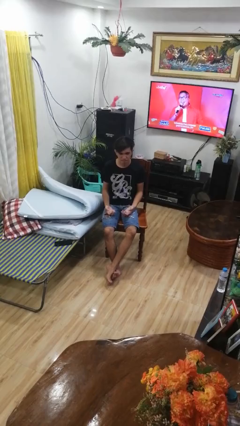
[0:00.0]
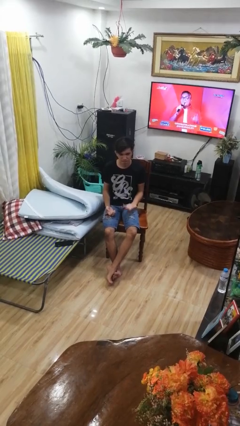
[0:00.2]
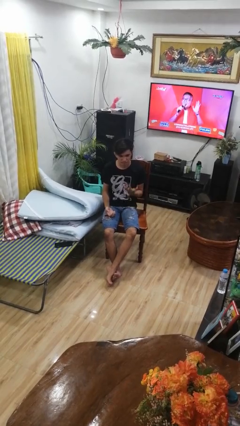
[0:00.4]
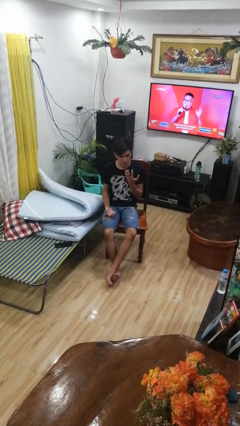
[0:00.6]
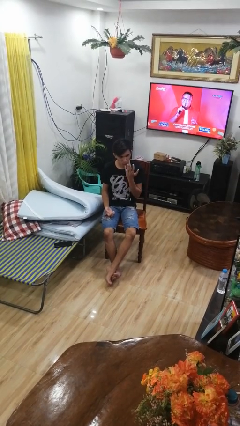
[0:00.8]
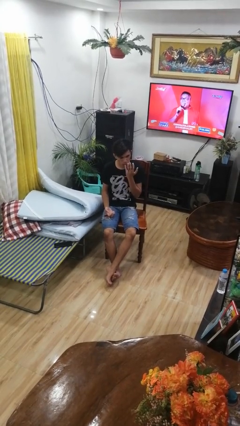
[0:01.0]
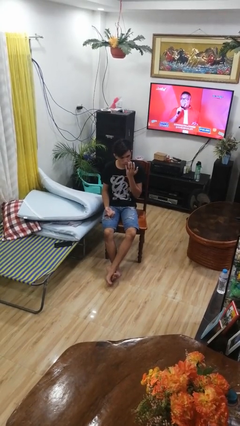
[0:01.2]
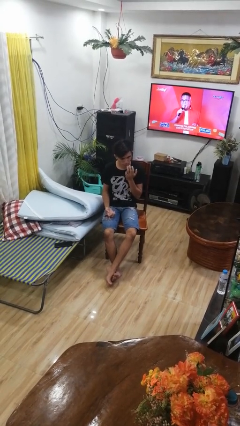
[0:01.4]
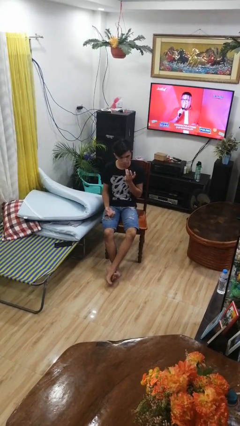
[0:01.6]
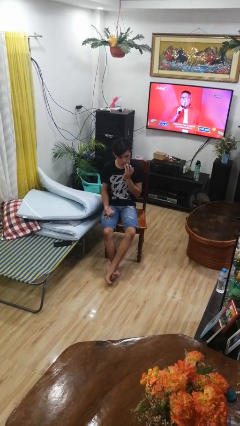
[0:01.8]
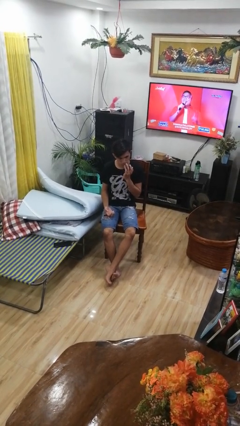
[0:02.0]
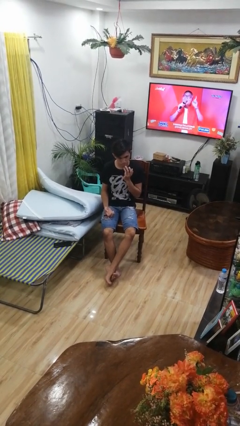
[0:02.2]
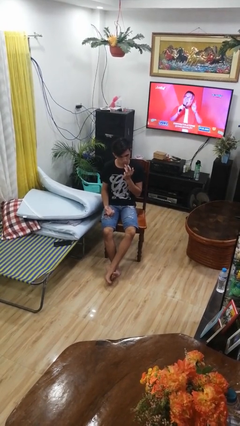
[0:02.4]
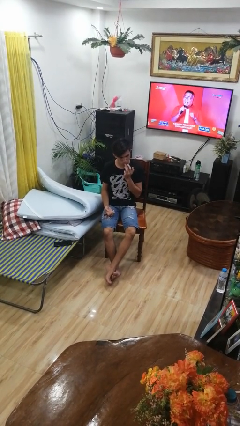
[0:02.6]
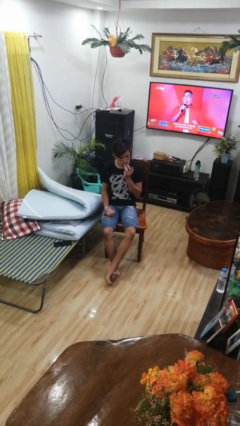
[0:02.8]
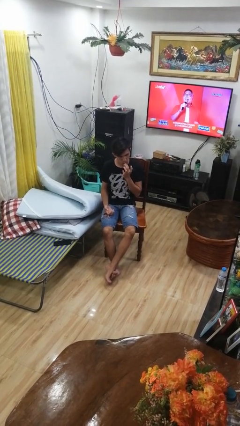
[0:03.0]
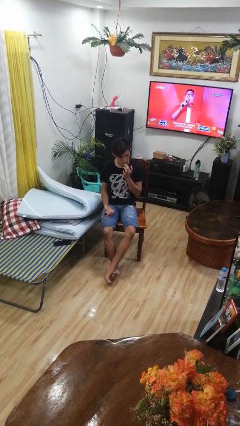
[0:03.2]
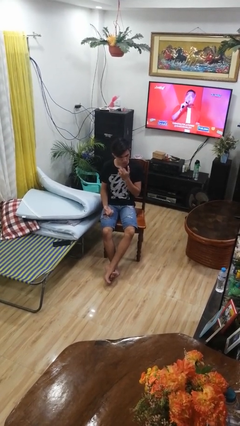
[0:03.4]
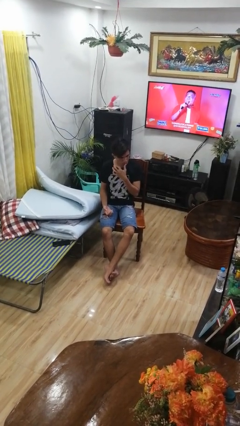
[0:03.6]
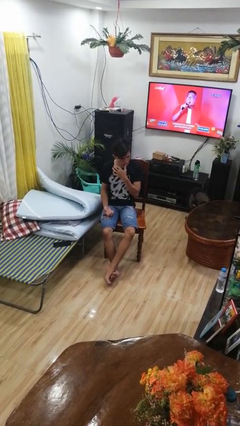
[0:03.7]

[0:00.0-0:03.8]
person licks fingers

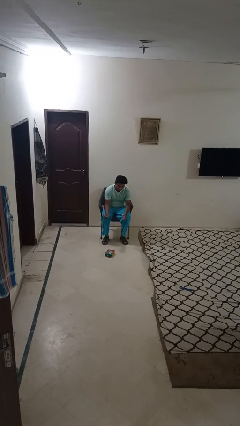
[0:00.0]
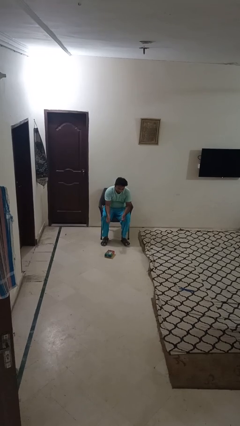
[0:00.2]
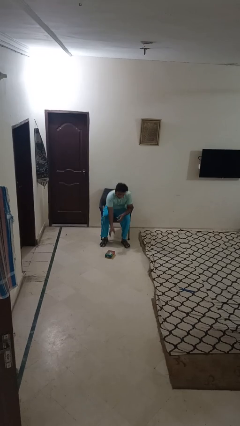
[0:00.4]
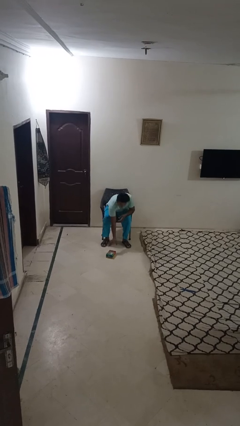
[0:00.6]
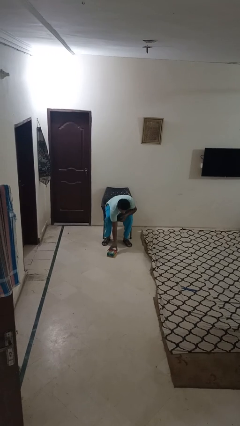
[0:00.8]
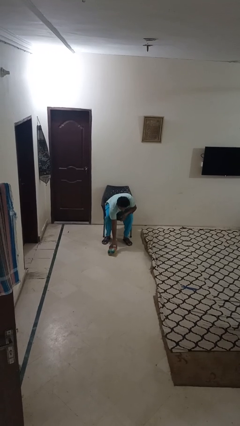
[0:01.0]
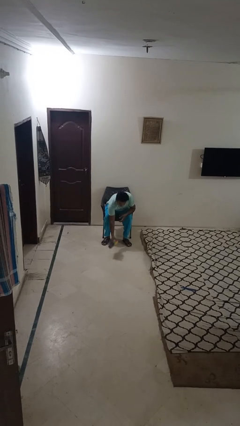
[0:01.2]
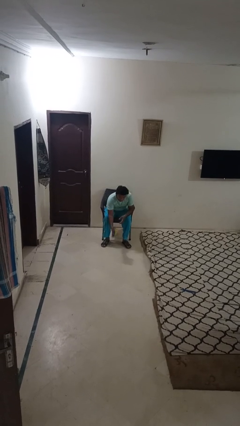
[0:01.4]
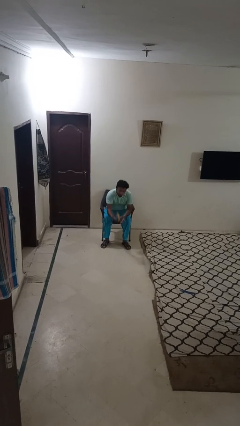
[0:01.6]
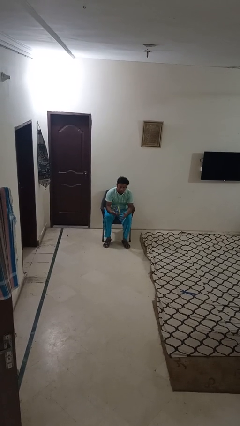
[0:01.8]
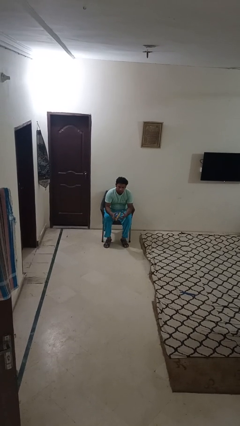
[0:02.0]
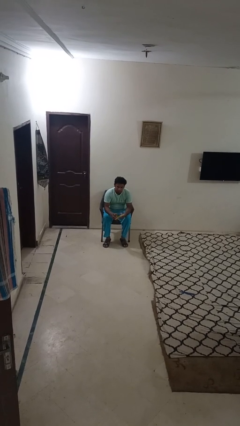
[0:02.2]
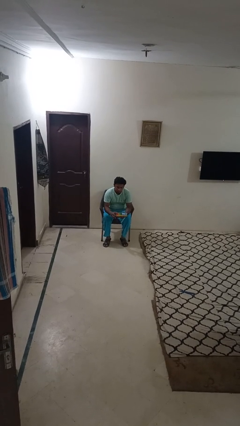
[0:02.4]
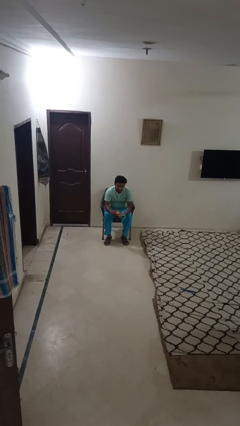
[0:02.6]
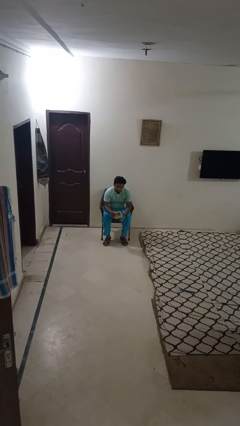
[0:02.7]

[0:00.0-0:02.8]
person picks up object from floor

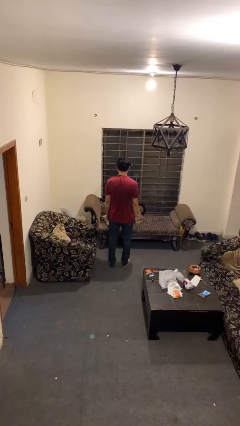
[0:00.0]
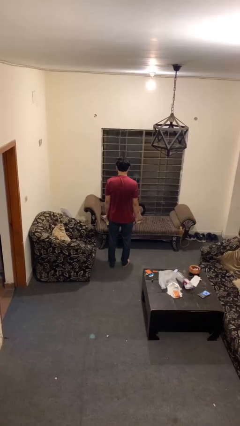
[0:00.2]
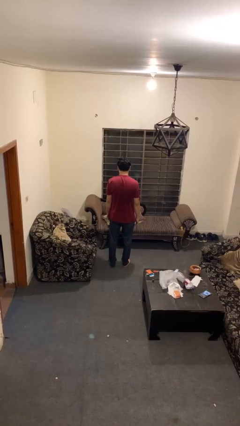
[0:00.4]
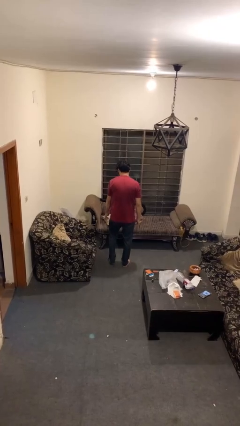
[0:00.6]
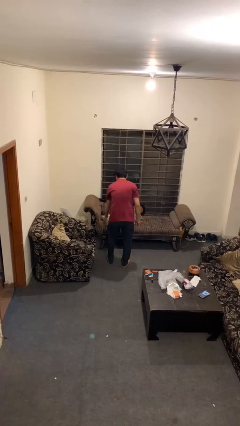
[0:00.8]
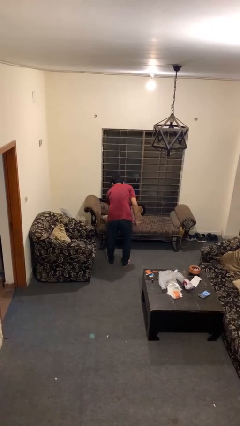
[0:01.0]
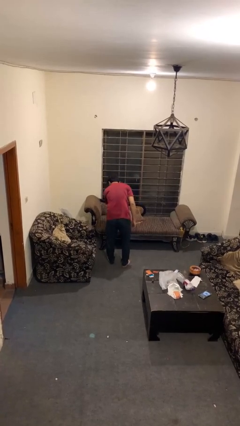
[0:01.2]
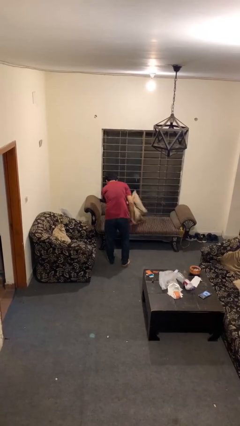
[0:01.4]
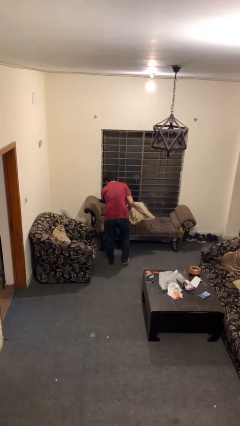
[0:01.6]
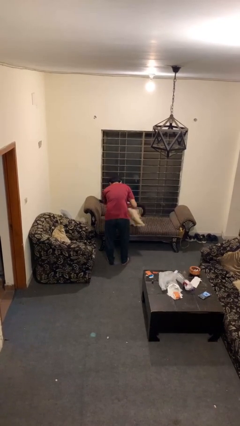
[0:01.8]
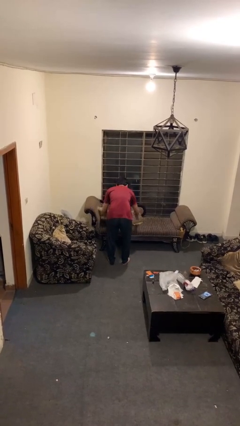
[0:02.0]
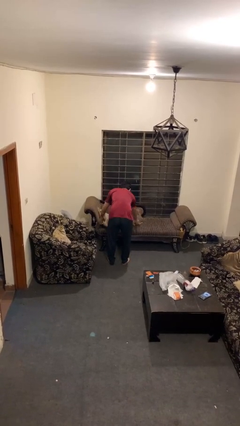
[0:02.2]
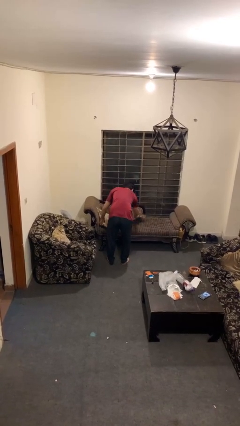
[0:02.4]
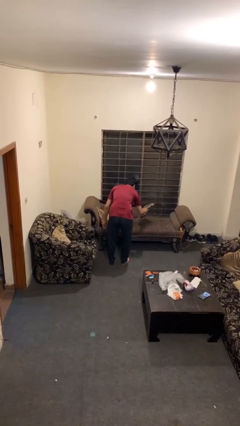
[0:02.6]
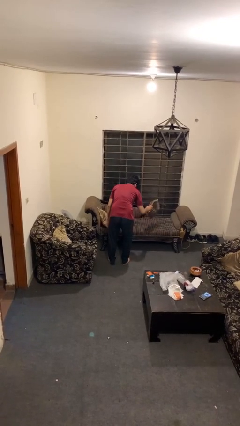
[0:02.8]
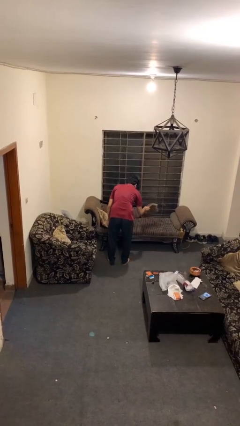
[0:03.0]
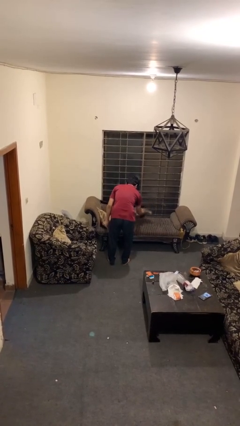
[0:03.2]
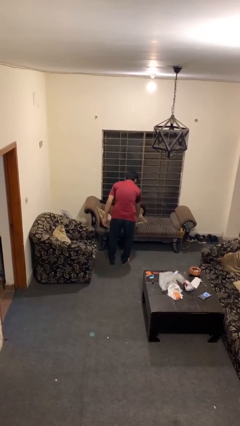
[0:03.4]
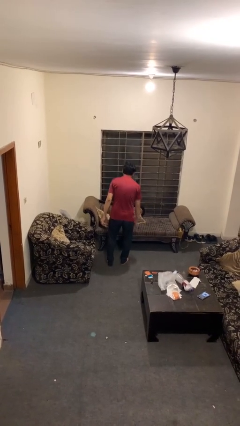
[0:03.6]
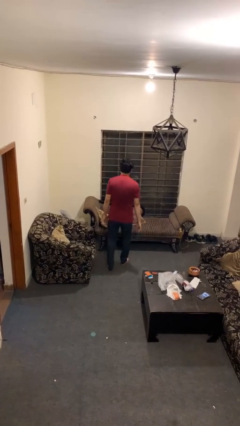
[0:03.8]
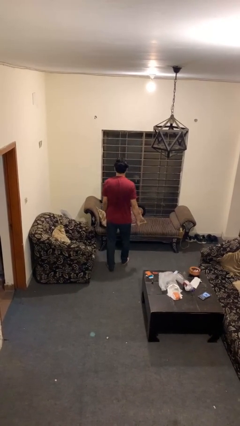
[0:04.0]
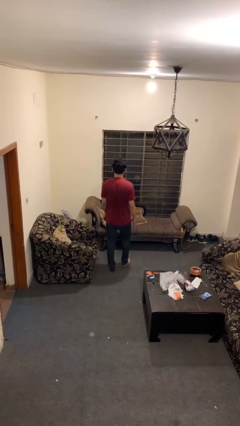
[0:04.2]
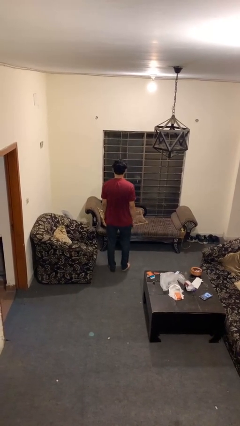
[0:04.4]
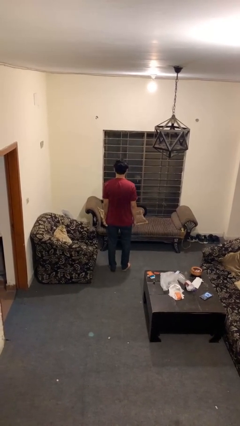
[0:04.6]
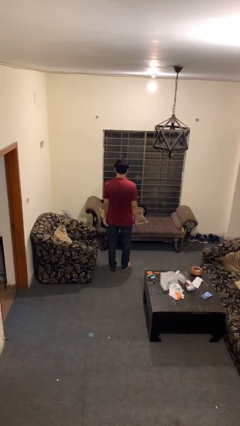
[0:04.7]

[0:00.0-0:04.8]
person searches in couch

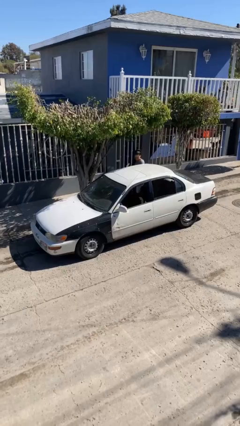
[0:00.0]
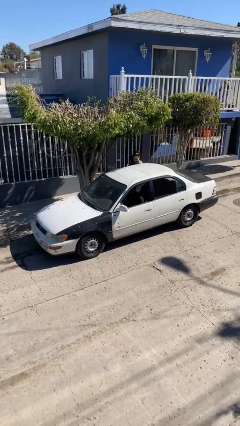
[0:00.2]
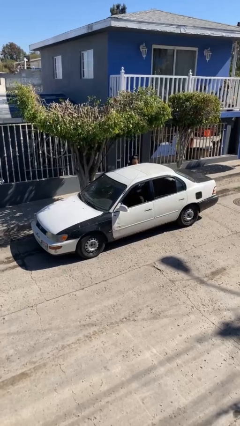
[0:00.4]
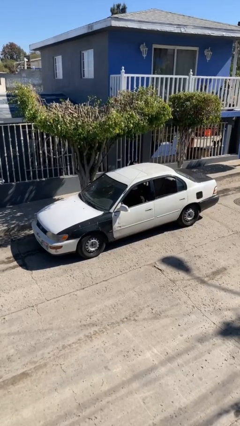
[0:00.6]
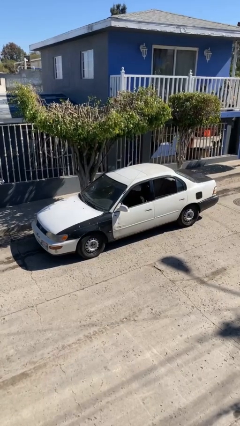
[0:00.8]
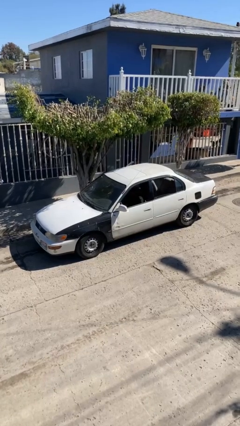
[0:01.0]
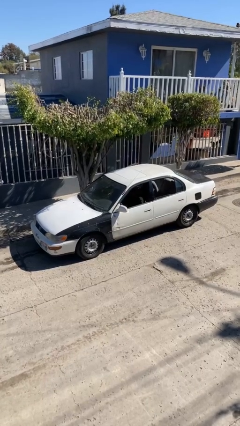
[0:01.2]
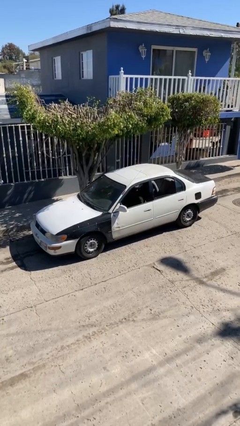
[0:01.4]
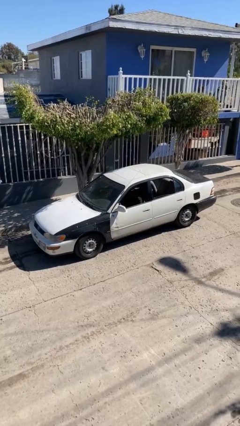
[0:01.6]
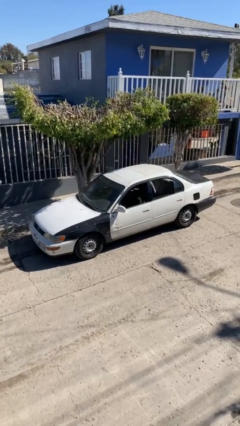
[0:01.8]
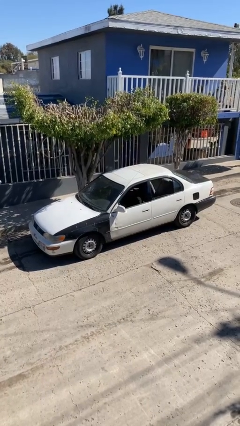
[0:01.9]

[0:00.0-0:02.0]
car picks up person

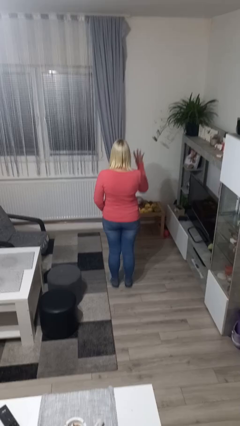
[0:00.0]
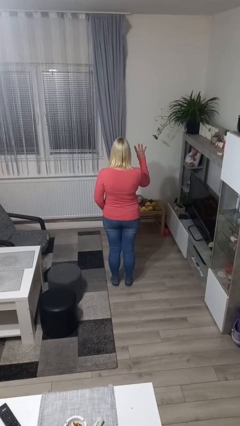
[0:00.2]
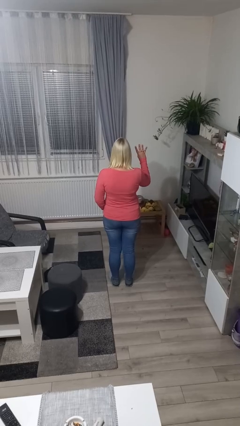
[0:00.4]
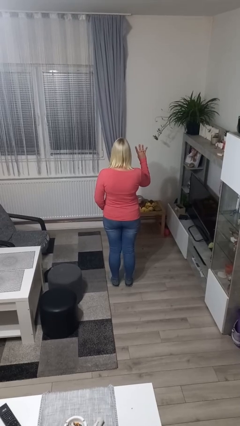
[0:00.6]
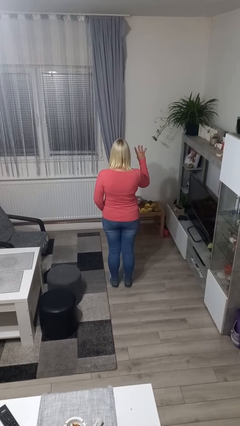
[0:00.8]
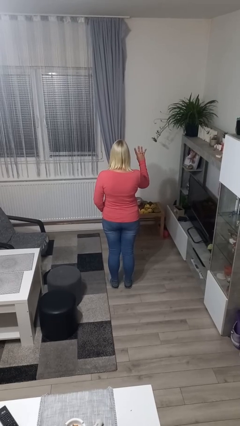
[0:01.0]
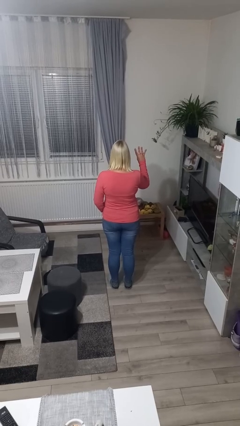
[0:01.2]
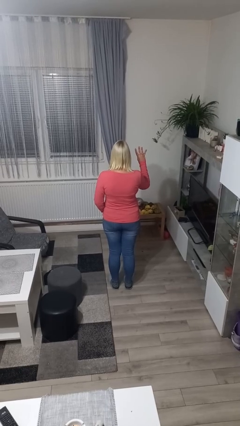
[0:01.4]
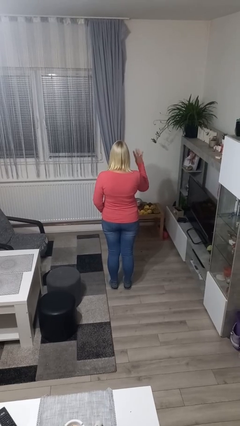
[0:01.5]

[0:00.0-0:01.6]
person gestures number four

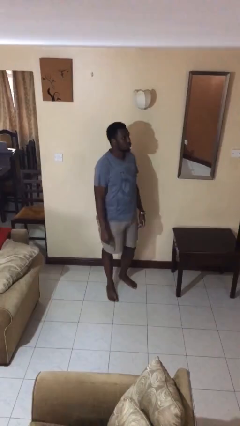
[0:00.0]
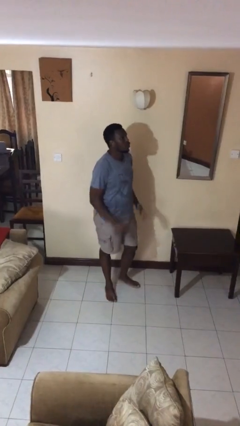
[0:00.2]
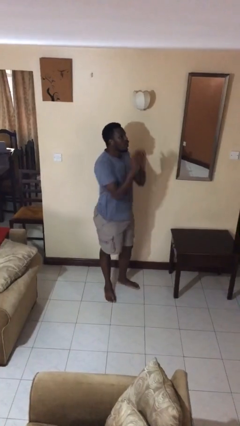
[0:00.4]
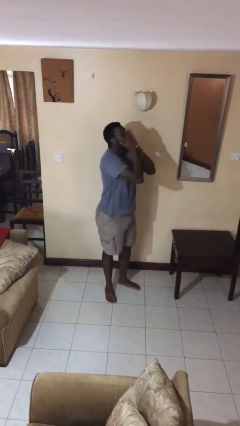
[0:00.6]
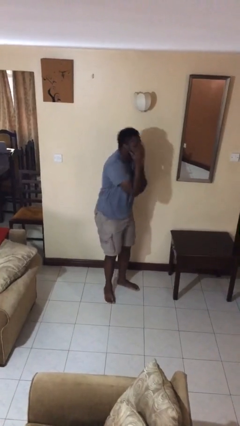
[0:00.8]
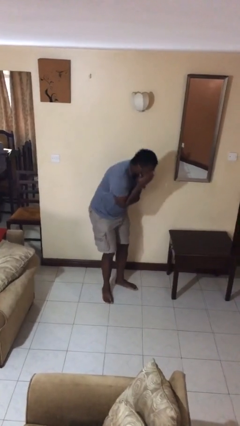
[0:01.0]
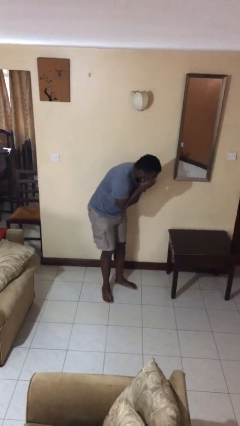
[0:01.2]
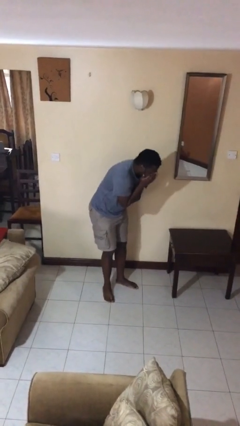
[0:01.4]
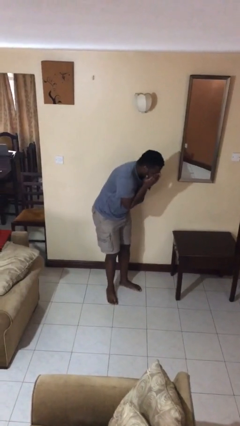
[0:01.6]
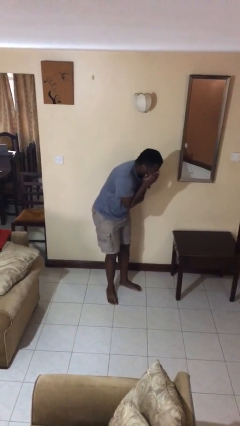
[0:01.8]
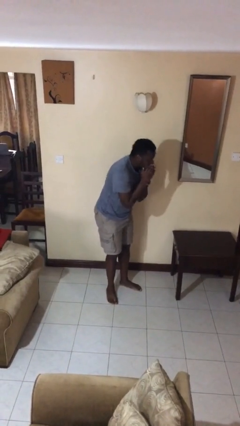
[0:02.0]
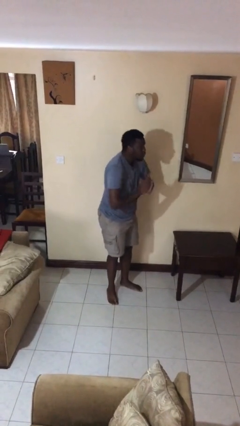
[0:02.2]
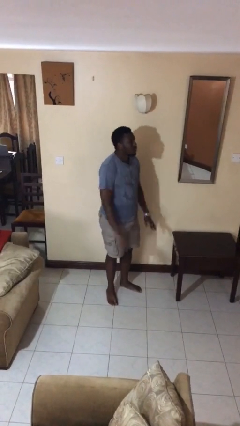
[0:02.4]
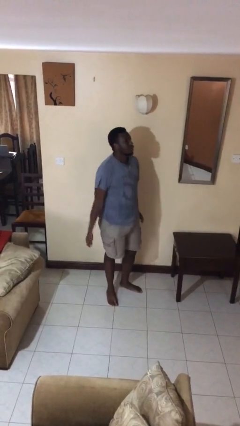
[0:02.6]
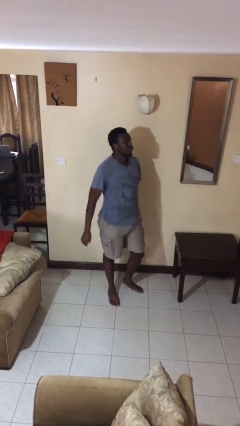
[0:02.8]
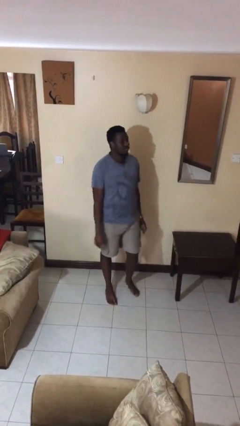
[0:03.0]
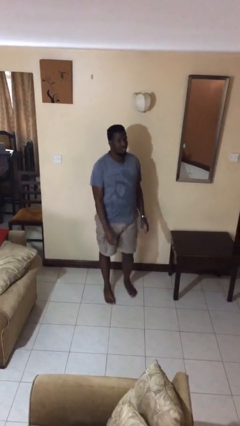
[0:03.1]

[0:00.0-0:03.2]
person sneezes into hand
